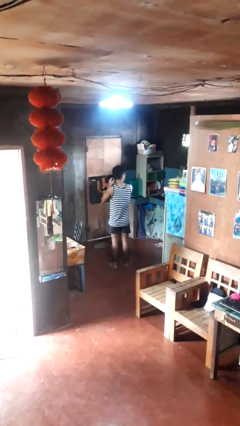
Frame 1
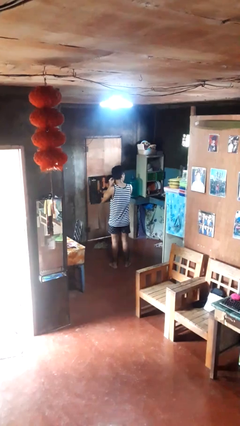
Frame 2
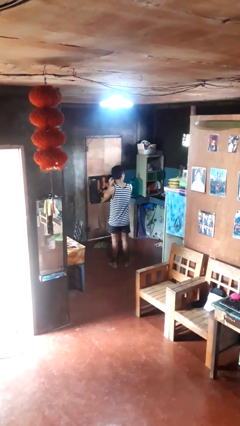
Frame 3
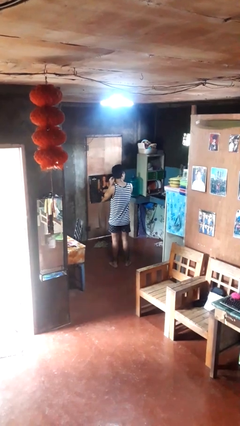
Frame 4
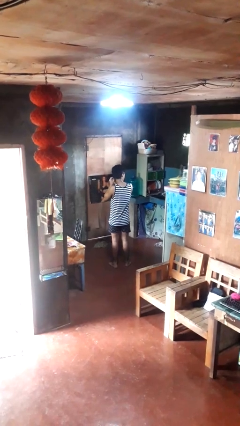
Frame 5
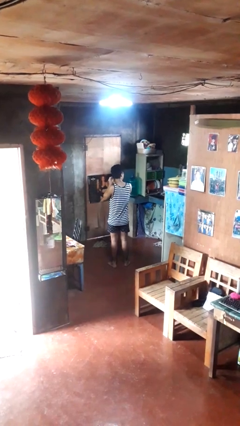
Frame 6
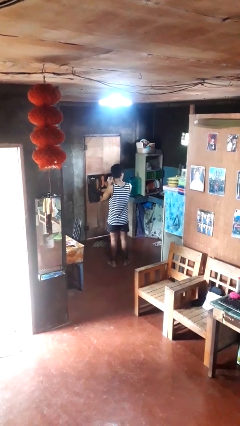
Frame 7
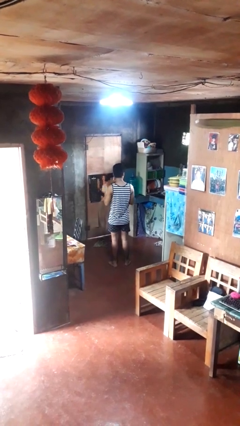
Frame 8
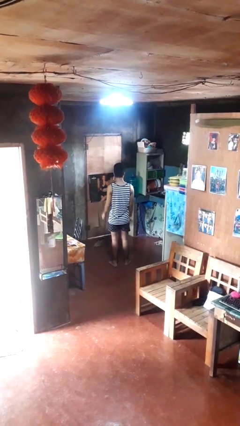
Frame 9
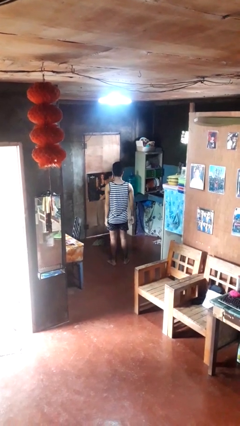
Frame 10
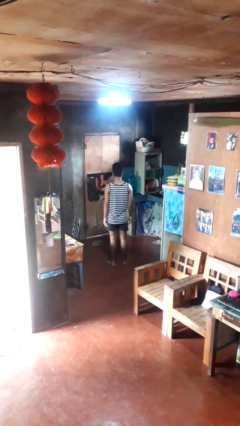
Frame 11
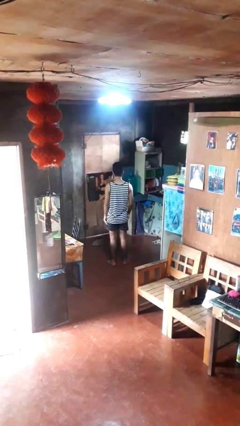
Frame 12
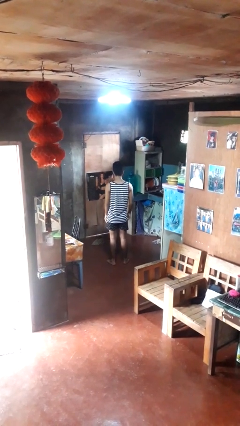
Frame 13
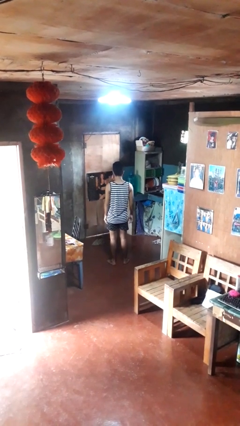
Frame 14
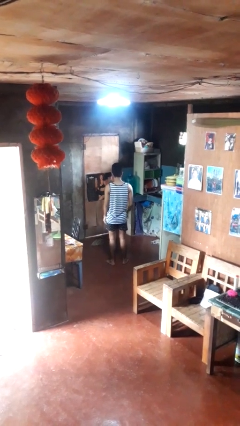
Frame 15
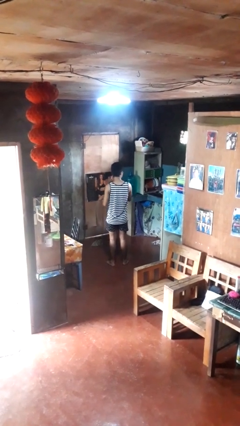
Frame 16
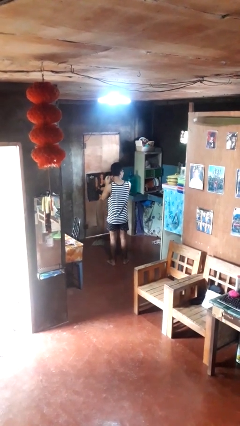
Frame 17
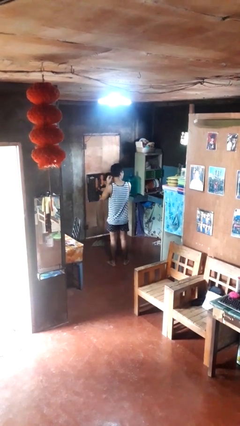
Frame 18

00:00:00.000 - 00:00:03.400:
person puts on earrings

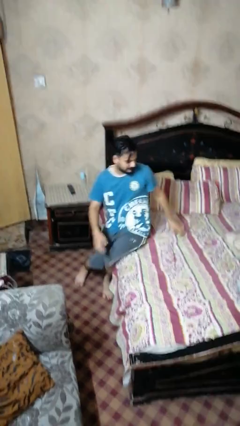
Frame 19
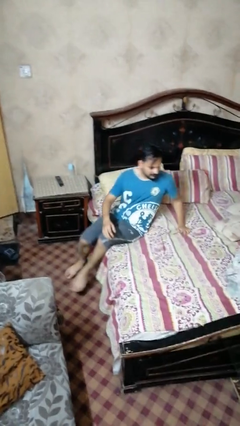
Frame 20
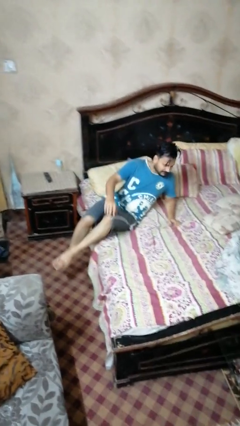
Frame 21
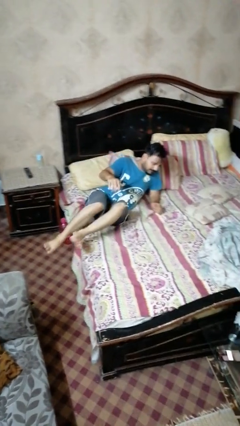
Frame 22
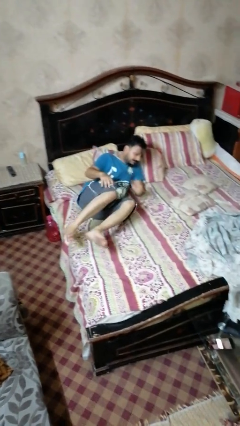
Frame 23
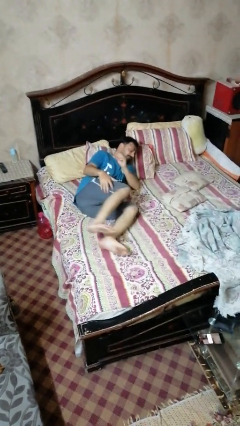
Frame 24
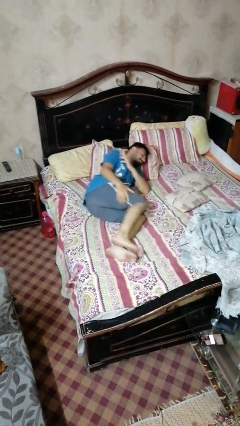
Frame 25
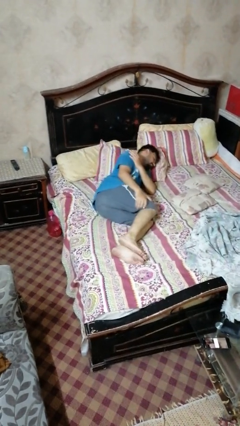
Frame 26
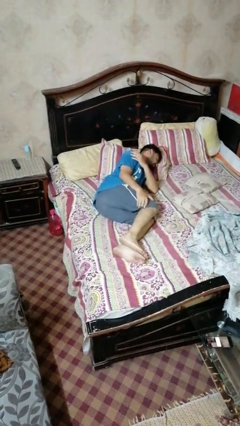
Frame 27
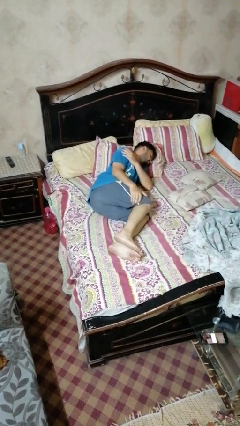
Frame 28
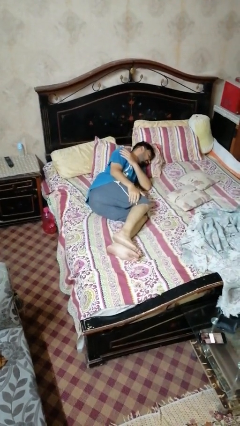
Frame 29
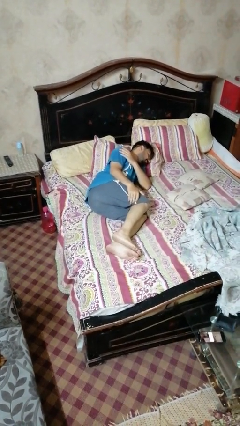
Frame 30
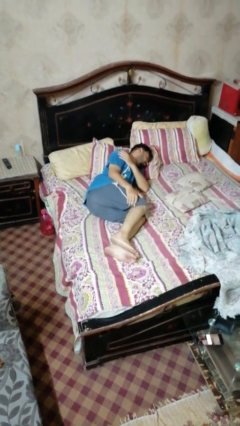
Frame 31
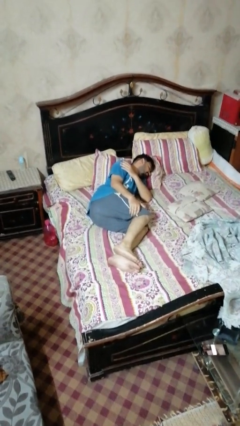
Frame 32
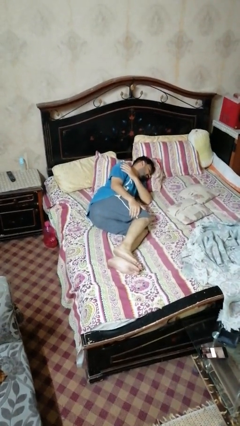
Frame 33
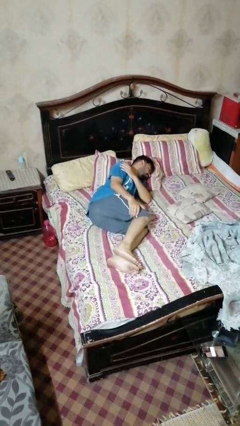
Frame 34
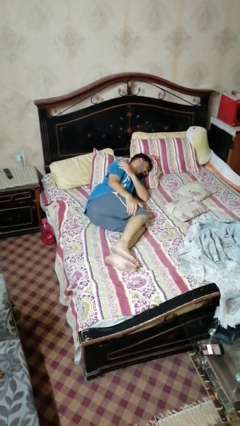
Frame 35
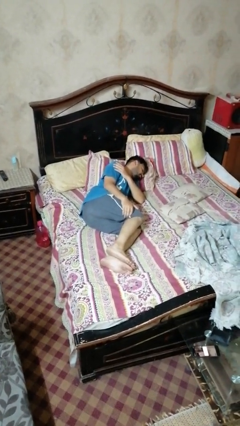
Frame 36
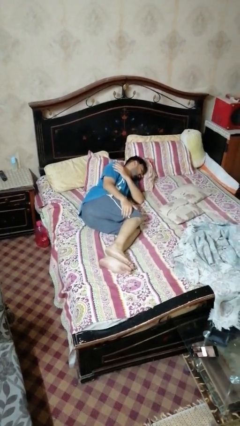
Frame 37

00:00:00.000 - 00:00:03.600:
person lies down on bed

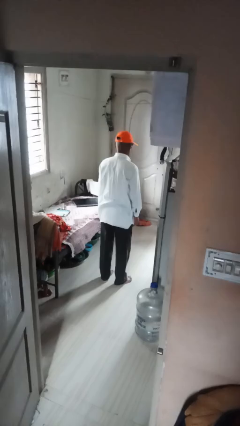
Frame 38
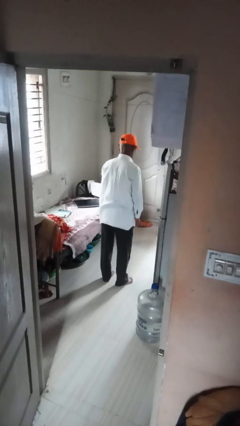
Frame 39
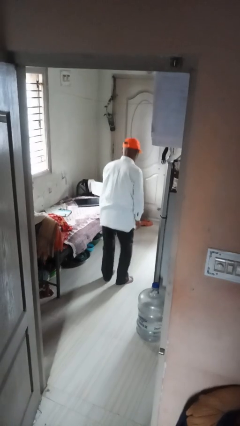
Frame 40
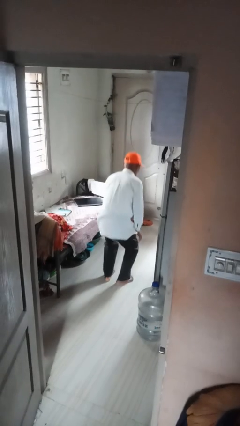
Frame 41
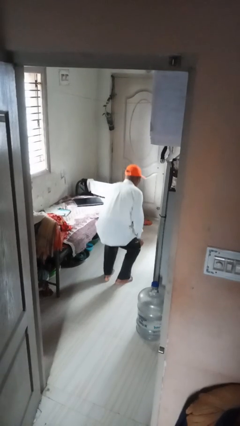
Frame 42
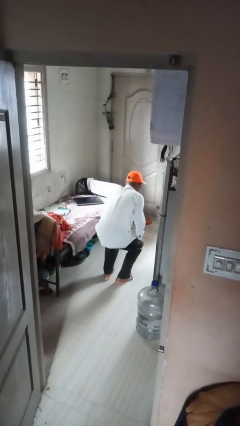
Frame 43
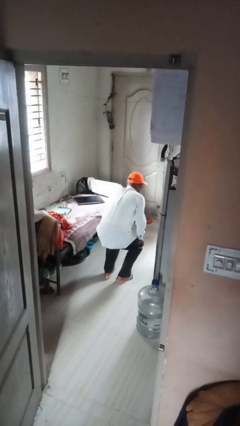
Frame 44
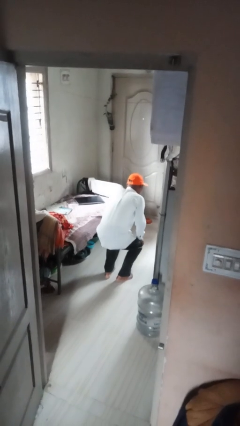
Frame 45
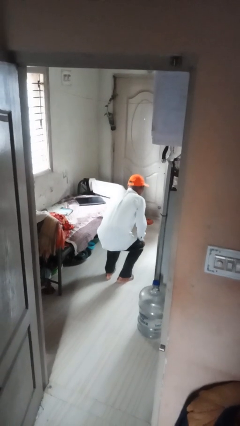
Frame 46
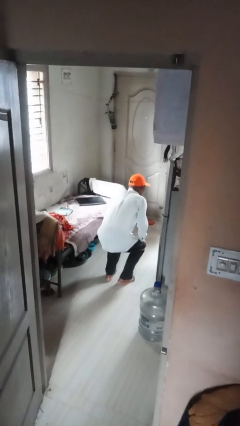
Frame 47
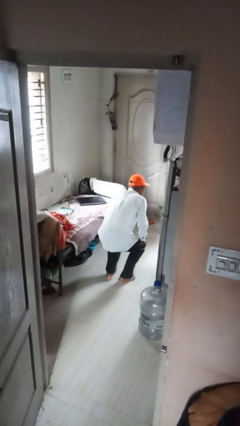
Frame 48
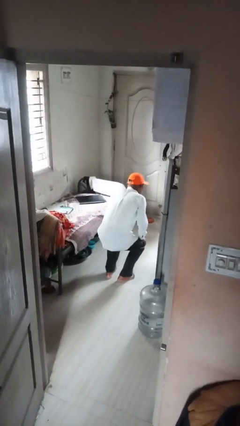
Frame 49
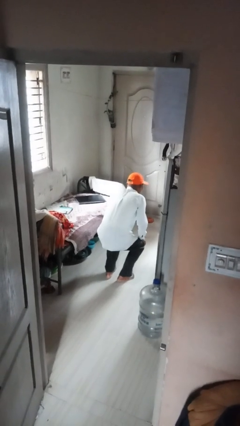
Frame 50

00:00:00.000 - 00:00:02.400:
person squats

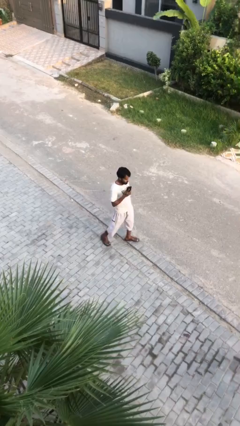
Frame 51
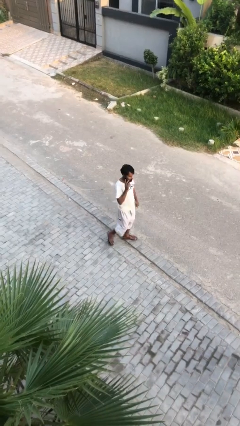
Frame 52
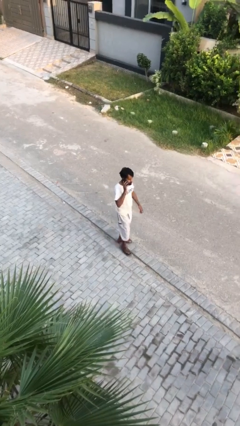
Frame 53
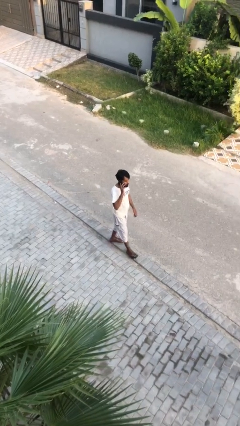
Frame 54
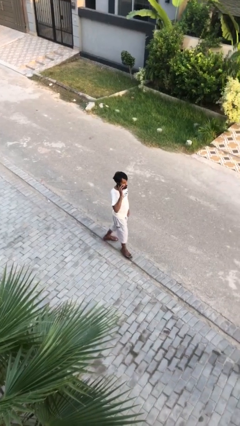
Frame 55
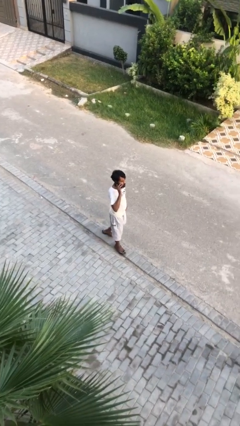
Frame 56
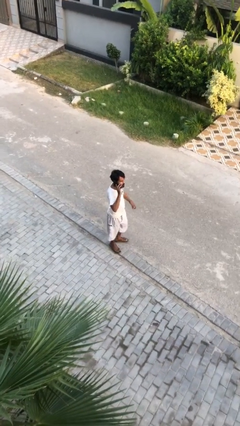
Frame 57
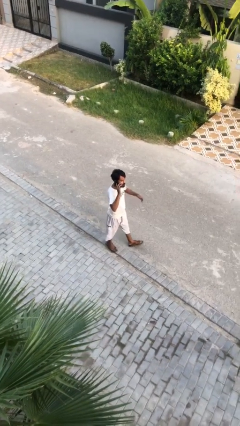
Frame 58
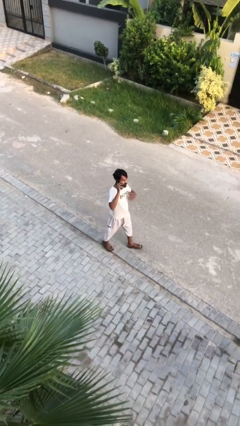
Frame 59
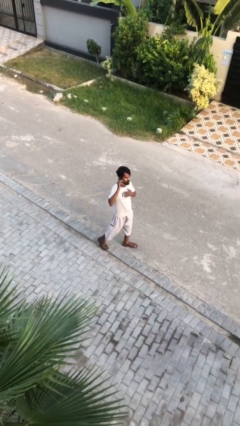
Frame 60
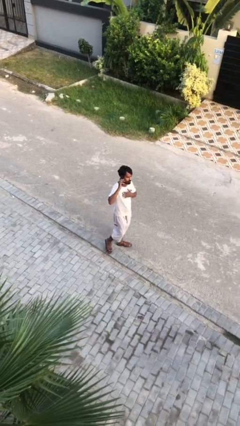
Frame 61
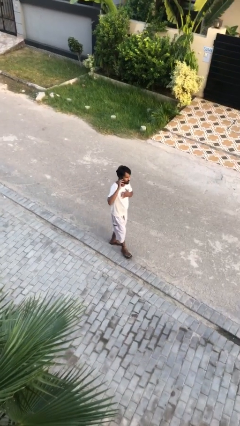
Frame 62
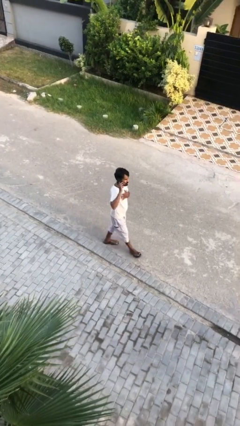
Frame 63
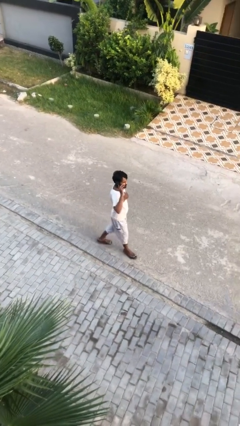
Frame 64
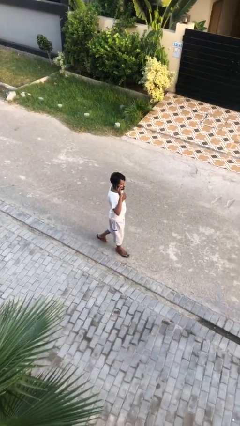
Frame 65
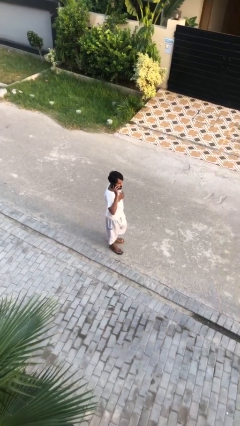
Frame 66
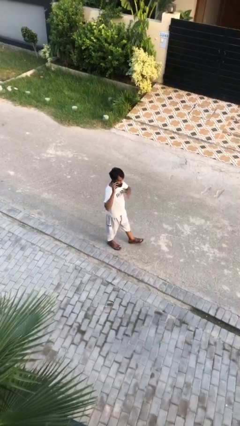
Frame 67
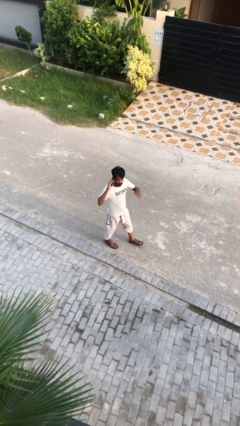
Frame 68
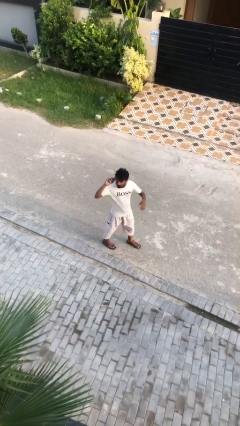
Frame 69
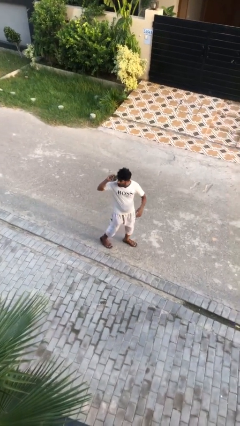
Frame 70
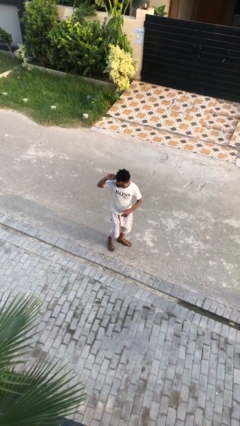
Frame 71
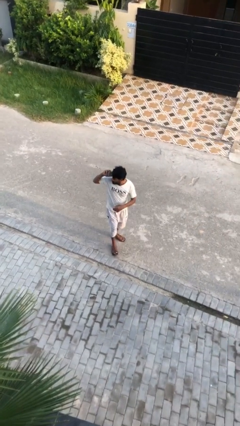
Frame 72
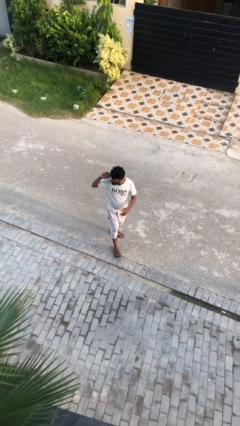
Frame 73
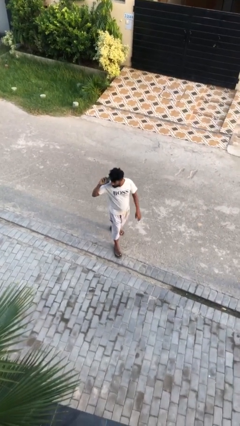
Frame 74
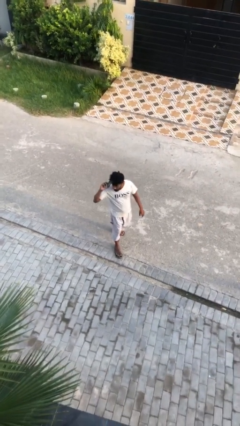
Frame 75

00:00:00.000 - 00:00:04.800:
person talks on phone

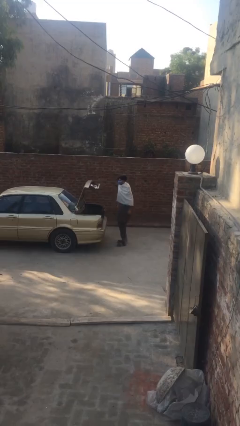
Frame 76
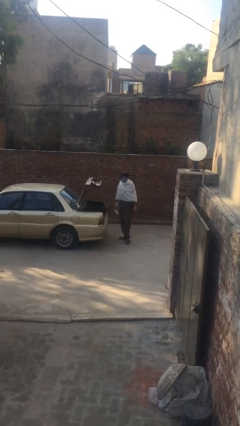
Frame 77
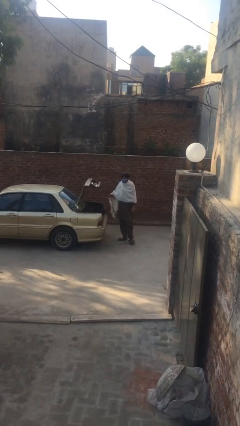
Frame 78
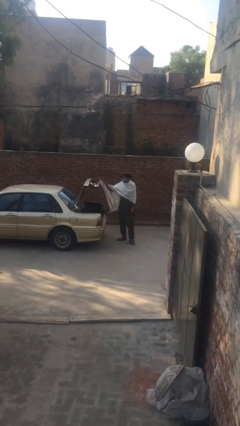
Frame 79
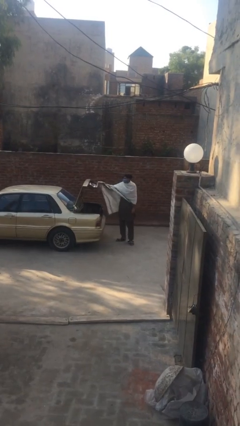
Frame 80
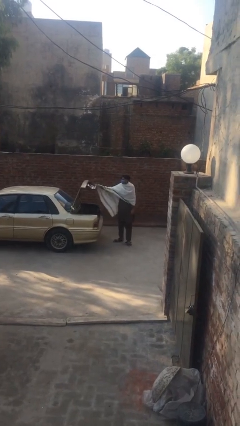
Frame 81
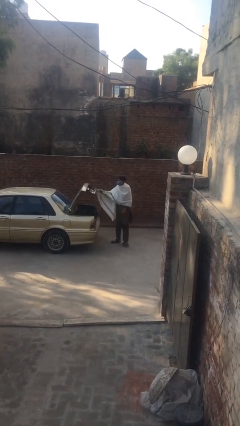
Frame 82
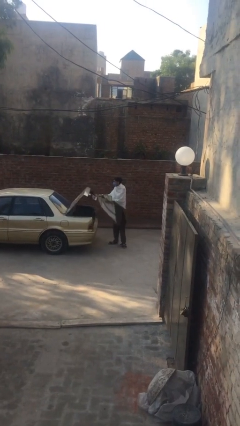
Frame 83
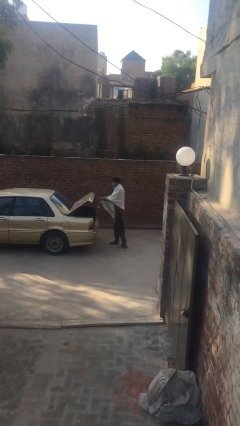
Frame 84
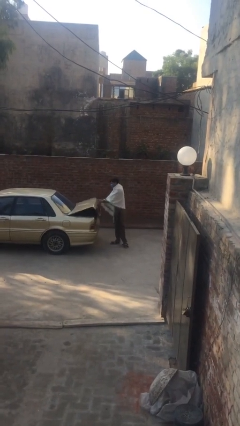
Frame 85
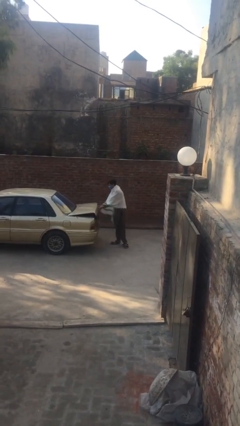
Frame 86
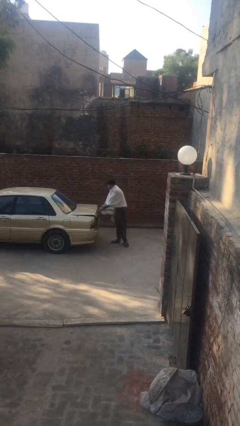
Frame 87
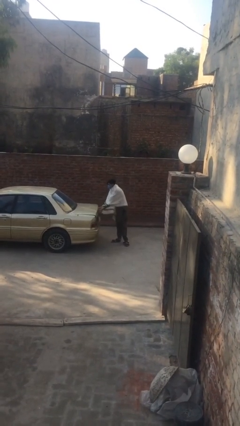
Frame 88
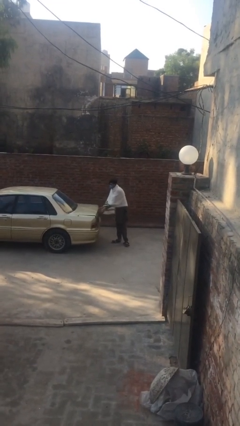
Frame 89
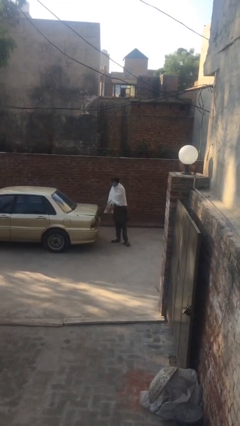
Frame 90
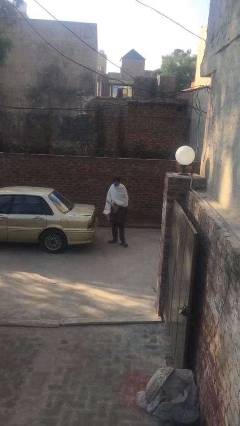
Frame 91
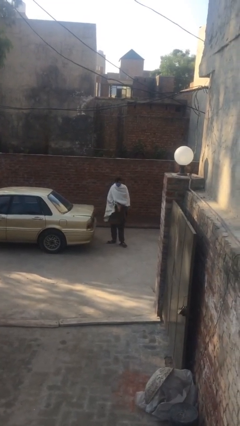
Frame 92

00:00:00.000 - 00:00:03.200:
person closes car trunk
